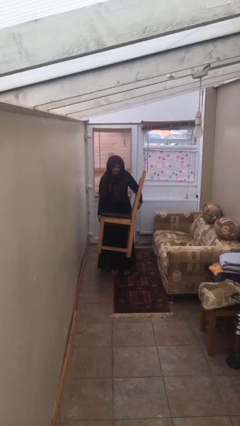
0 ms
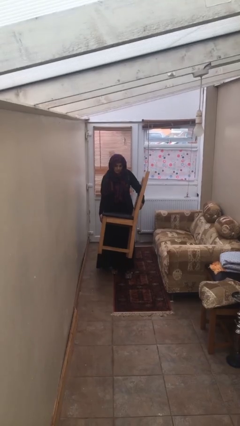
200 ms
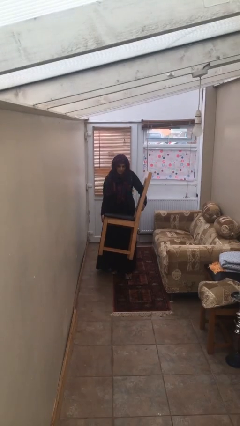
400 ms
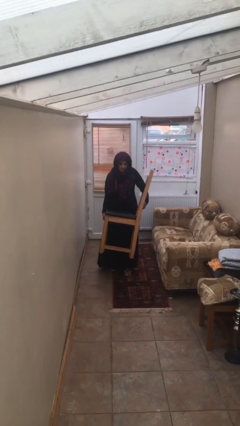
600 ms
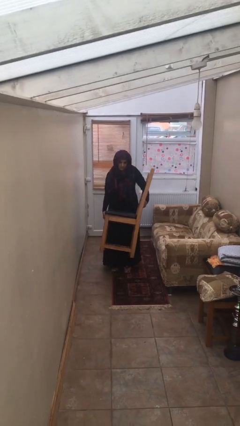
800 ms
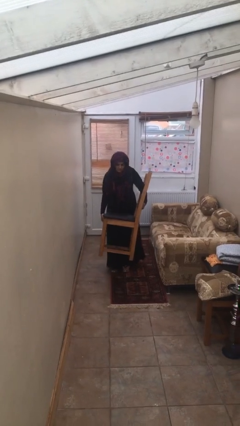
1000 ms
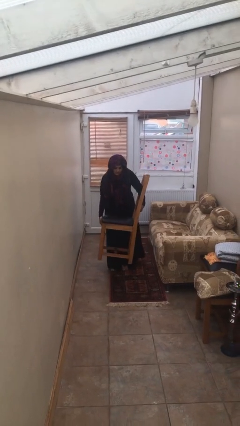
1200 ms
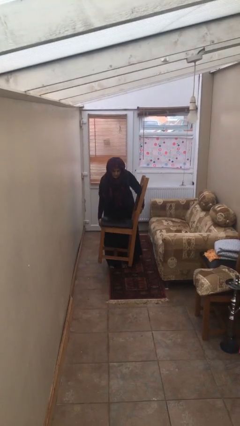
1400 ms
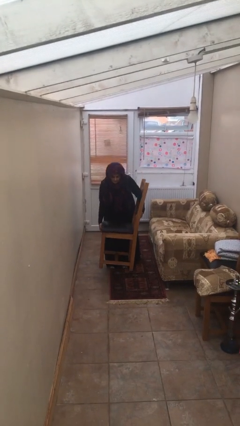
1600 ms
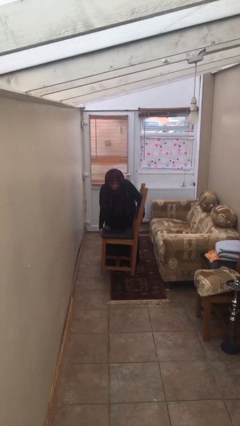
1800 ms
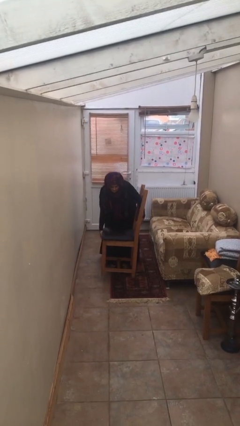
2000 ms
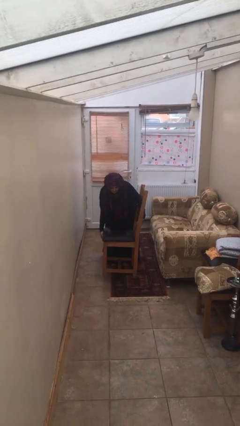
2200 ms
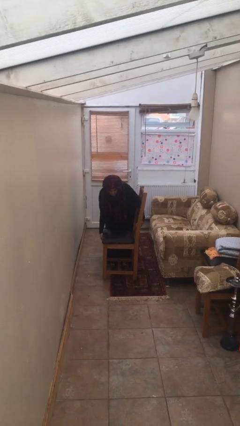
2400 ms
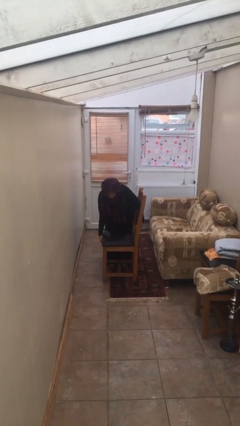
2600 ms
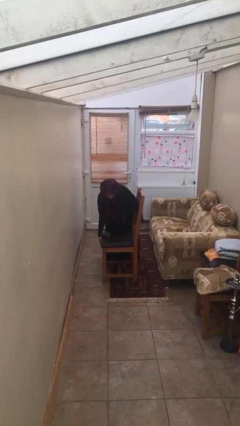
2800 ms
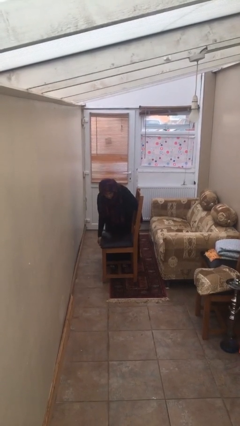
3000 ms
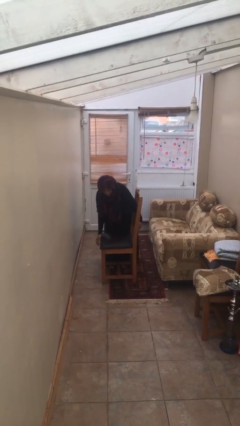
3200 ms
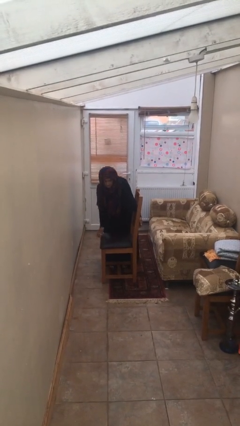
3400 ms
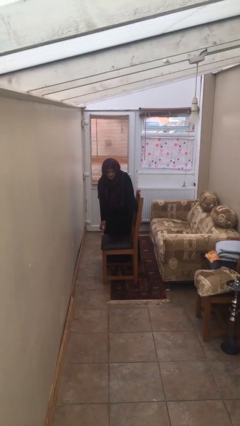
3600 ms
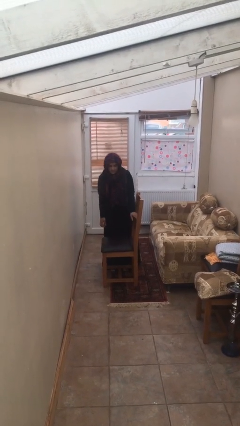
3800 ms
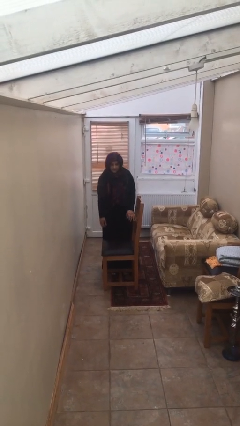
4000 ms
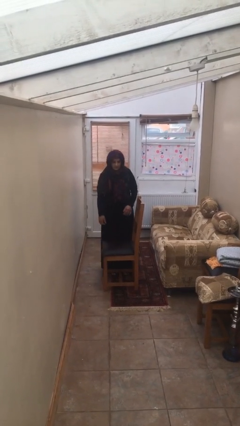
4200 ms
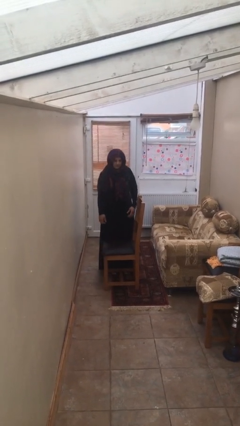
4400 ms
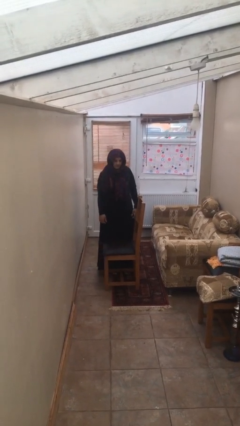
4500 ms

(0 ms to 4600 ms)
person puts down object on floor

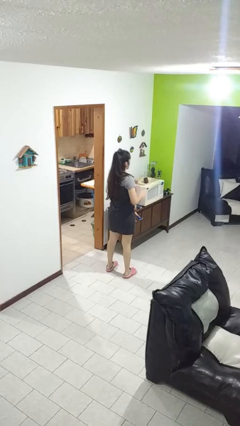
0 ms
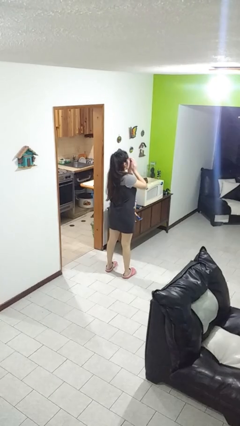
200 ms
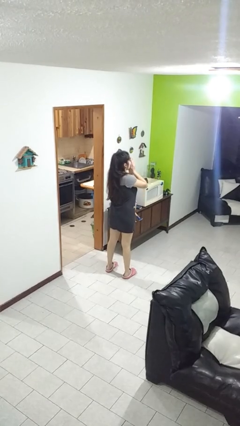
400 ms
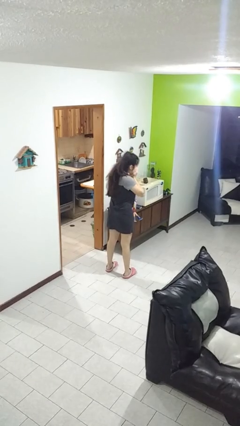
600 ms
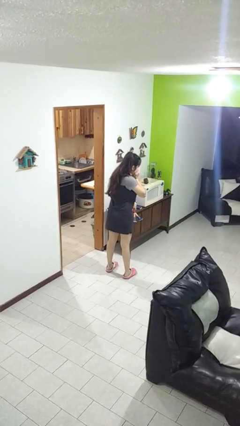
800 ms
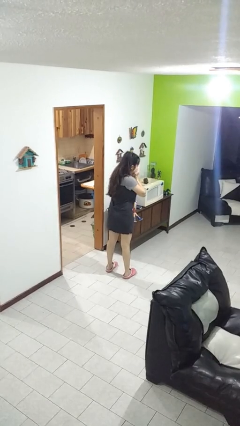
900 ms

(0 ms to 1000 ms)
person sneezes into hand

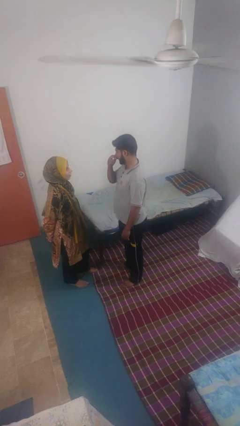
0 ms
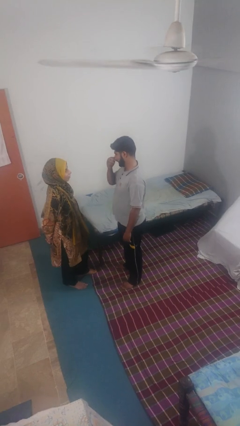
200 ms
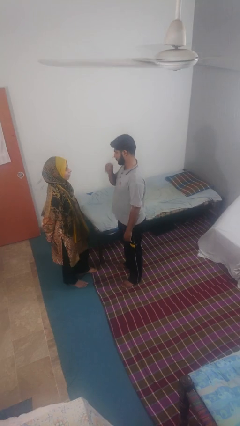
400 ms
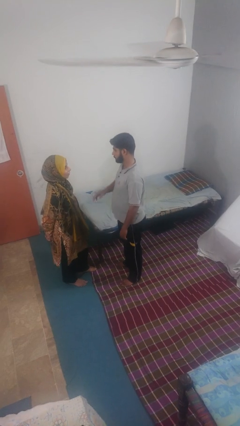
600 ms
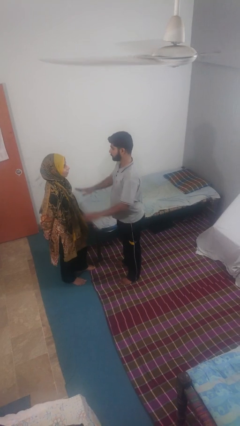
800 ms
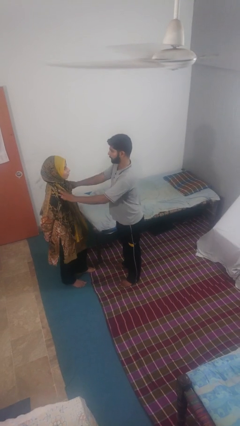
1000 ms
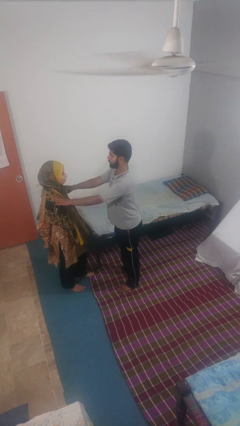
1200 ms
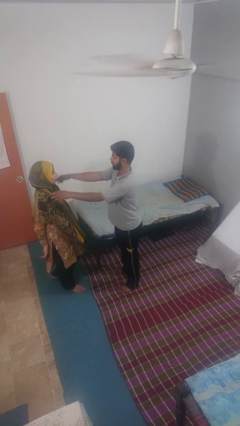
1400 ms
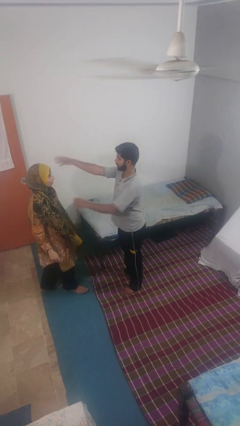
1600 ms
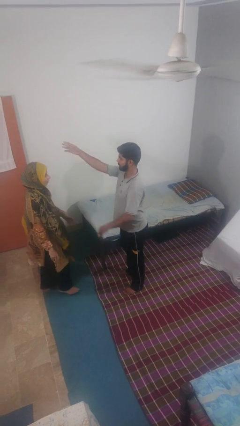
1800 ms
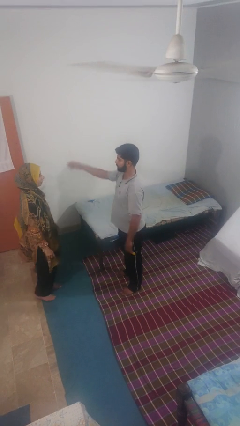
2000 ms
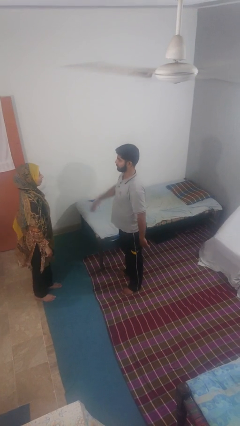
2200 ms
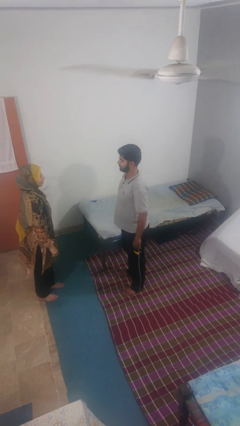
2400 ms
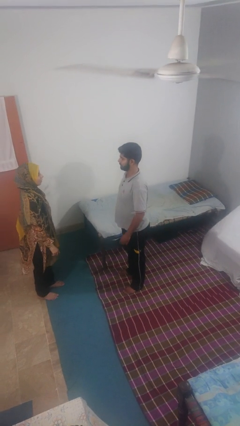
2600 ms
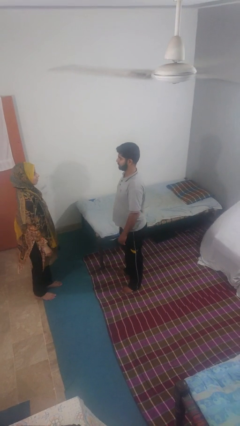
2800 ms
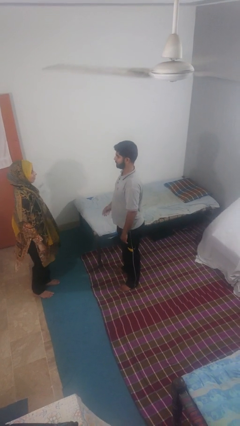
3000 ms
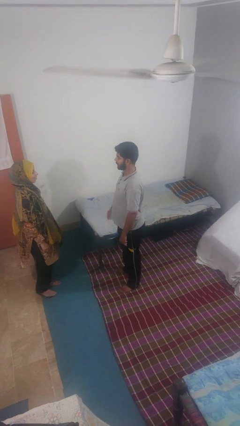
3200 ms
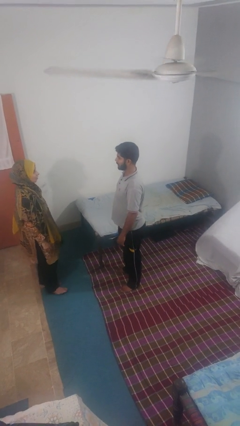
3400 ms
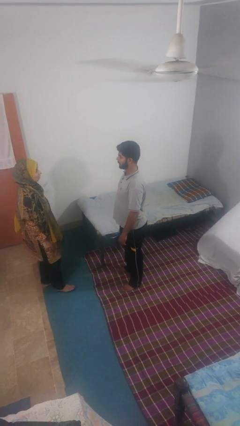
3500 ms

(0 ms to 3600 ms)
person shoves person

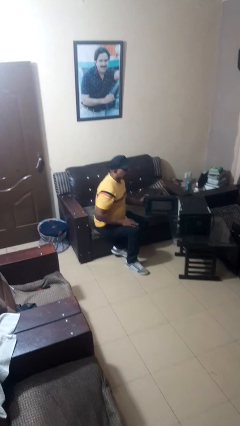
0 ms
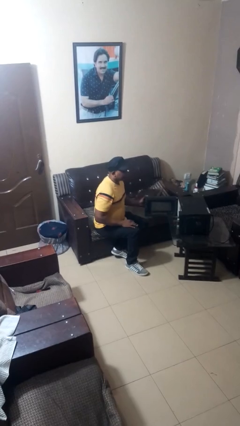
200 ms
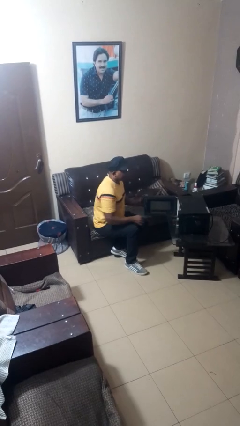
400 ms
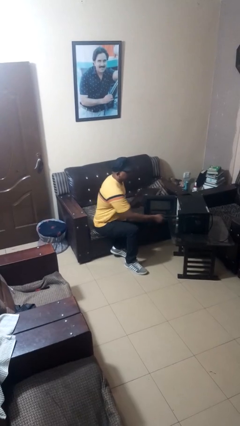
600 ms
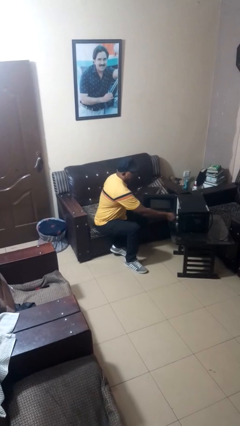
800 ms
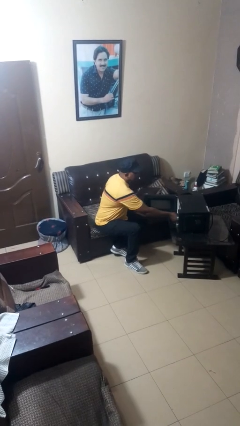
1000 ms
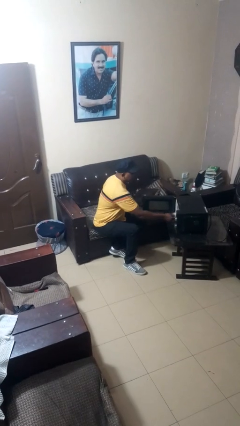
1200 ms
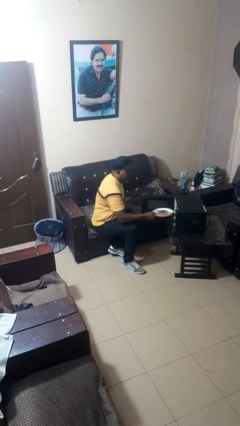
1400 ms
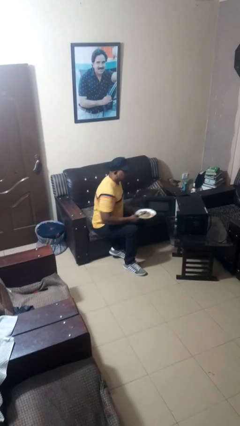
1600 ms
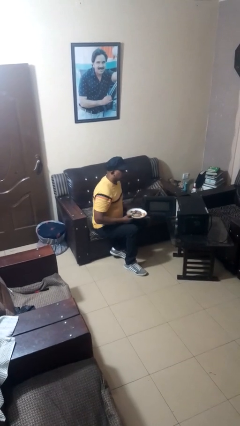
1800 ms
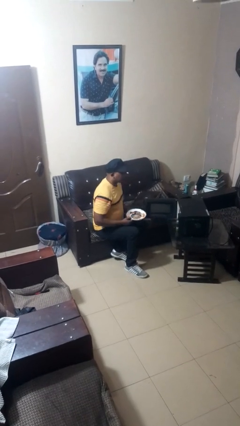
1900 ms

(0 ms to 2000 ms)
person takes object from microwave

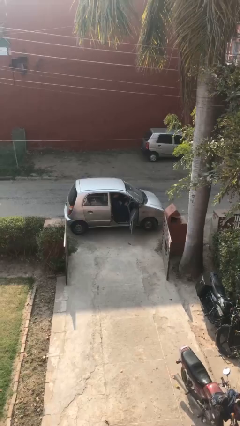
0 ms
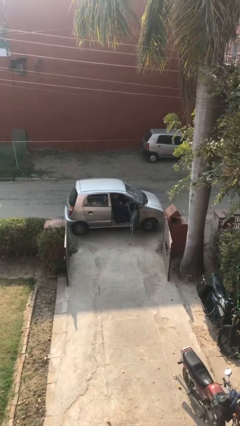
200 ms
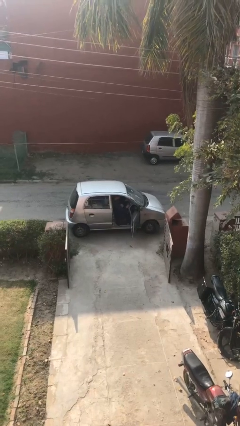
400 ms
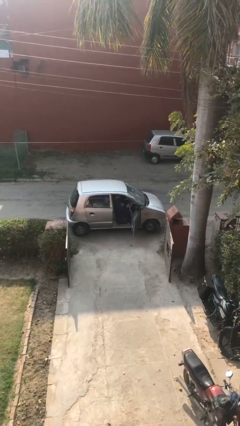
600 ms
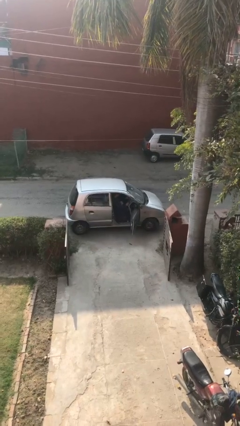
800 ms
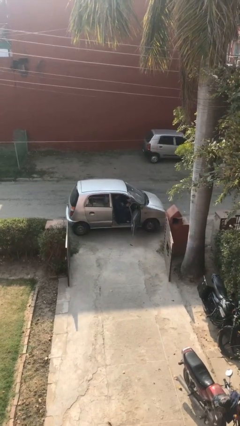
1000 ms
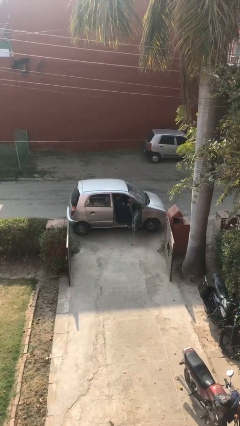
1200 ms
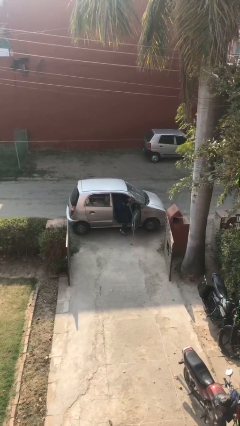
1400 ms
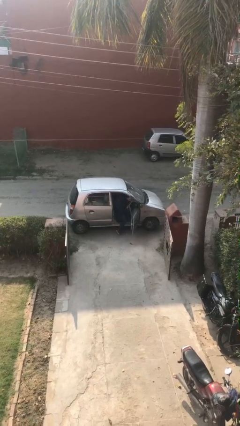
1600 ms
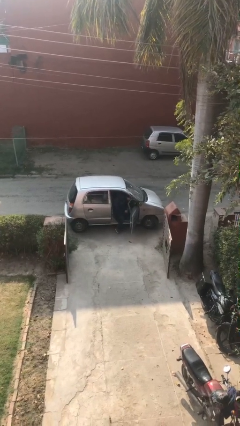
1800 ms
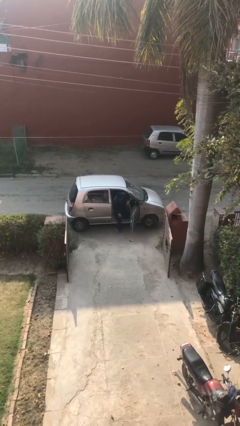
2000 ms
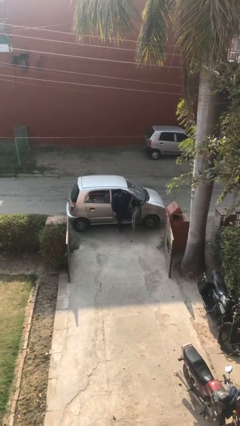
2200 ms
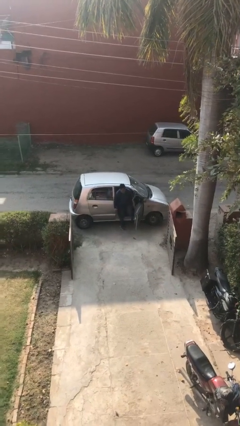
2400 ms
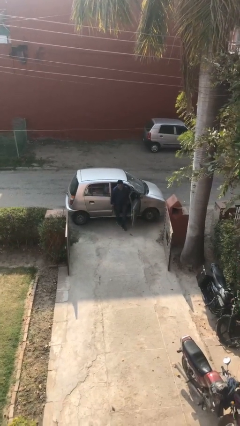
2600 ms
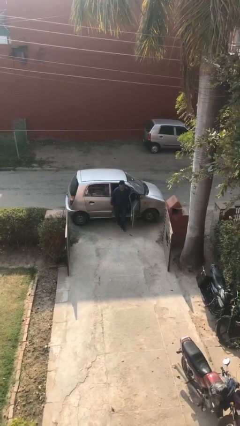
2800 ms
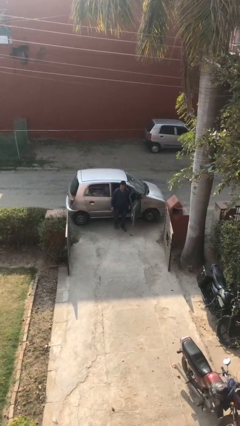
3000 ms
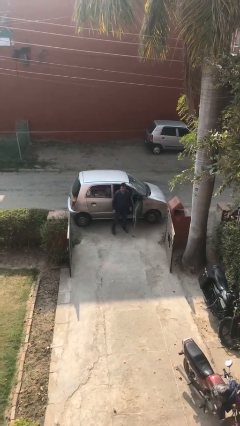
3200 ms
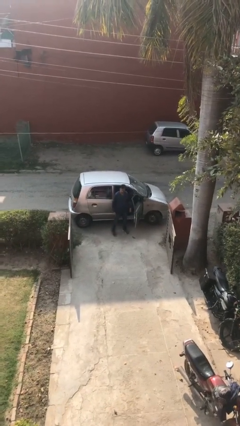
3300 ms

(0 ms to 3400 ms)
person exits car

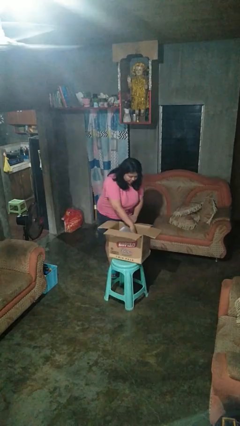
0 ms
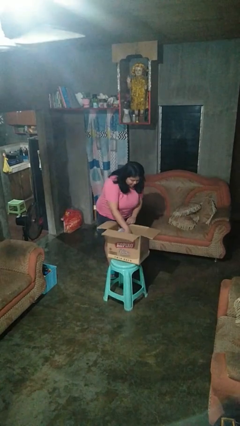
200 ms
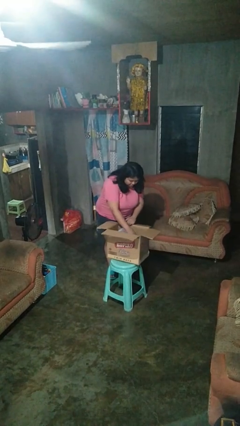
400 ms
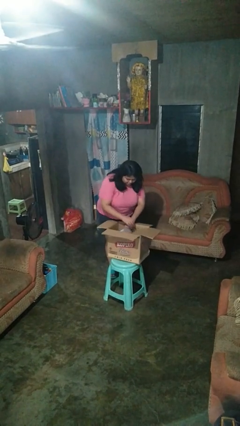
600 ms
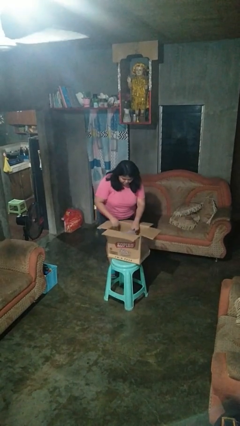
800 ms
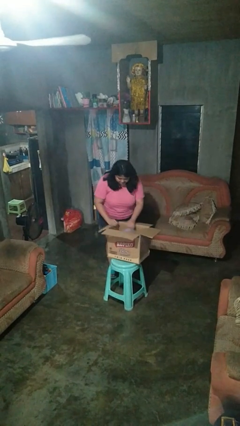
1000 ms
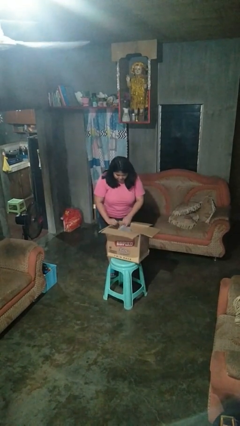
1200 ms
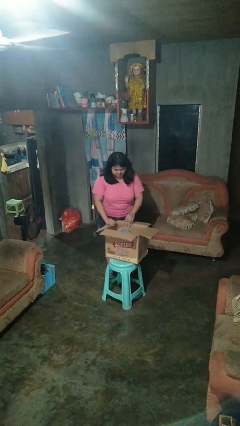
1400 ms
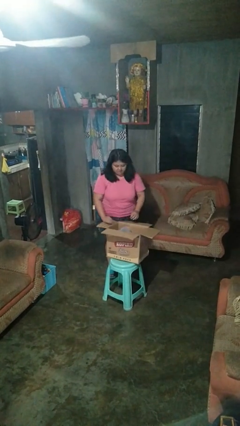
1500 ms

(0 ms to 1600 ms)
person searches in box

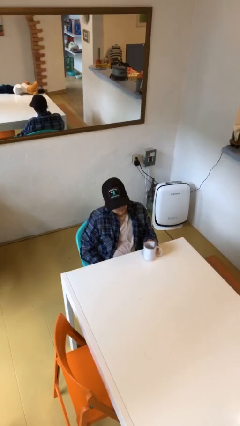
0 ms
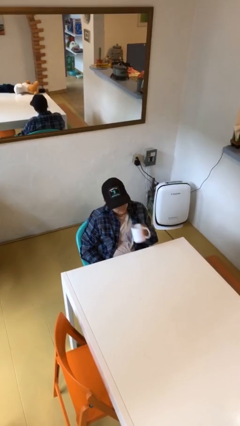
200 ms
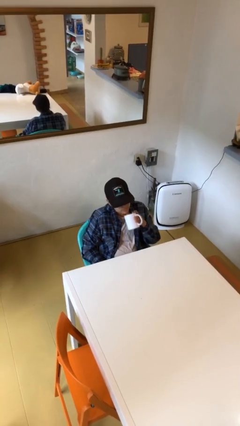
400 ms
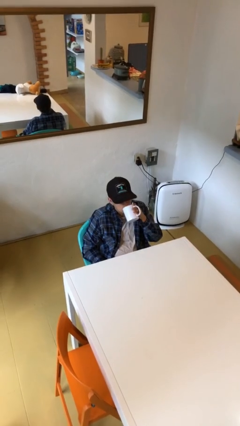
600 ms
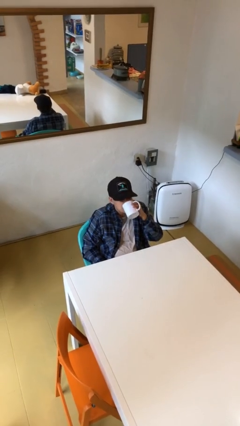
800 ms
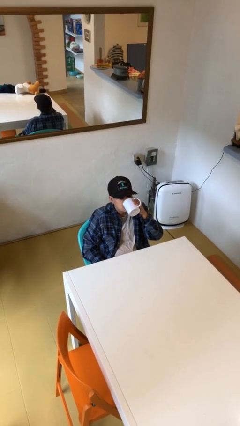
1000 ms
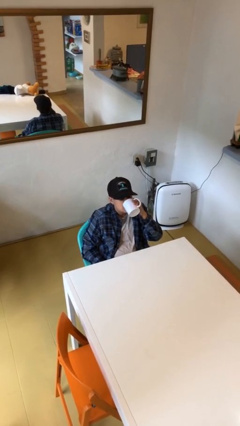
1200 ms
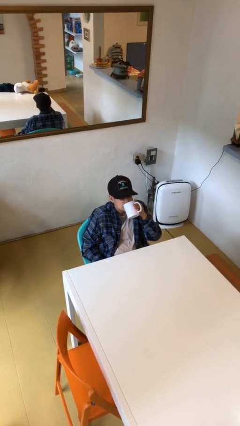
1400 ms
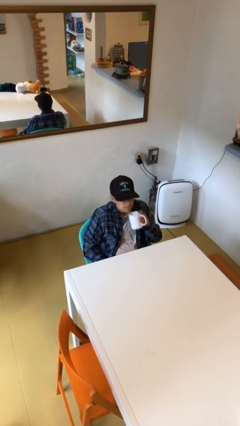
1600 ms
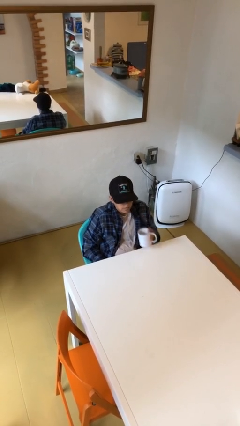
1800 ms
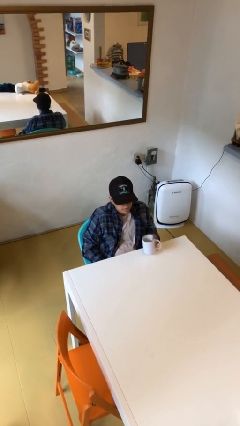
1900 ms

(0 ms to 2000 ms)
person drinks from mug
